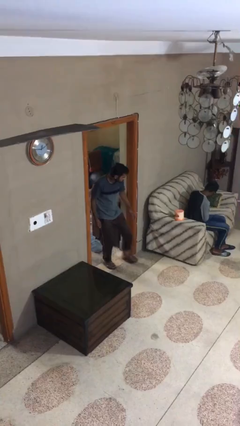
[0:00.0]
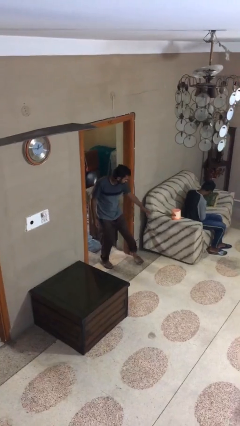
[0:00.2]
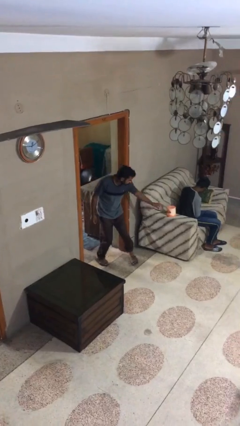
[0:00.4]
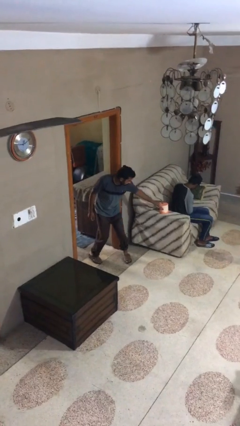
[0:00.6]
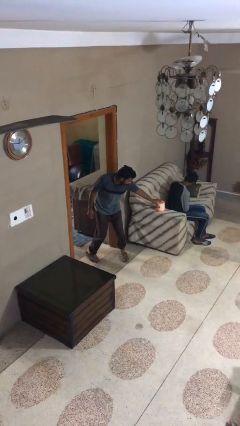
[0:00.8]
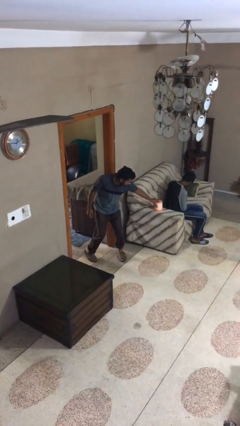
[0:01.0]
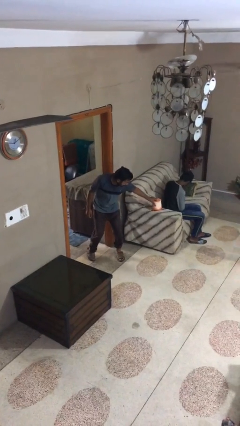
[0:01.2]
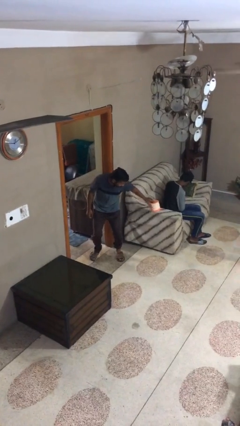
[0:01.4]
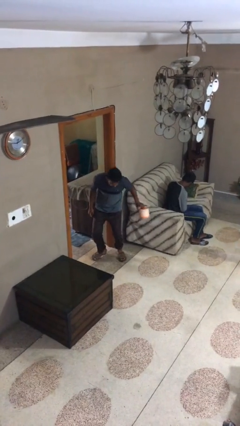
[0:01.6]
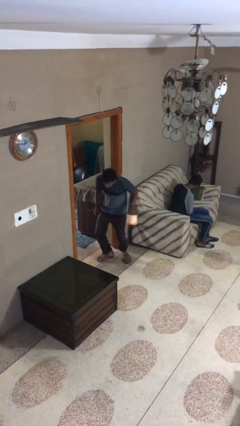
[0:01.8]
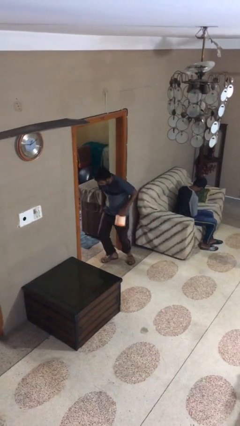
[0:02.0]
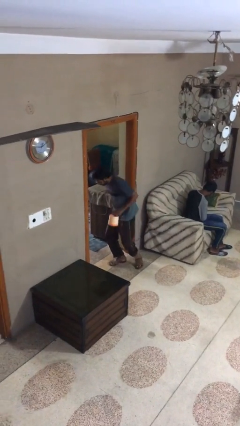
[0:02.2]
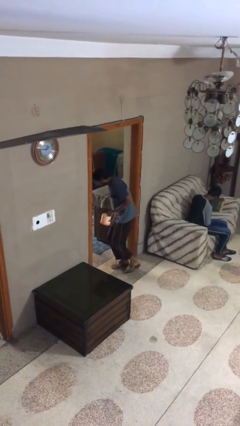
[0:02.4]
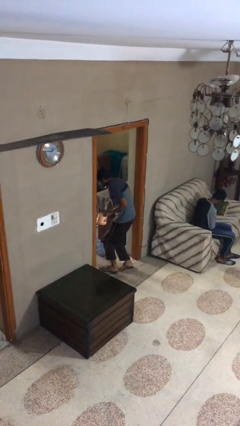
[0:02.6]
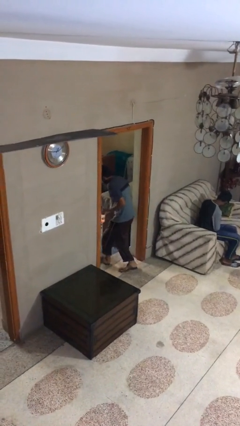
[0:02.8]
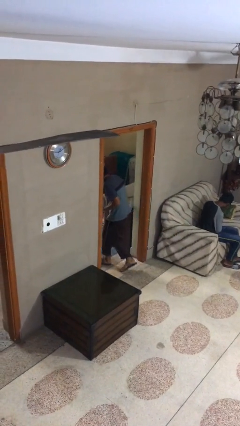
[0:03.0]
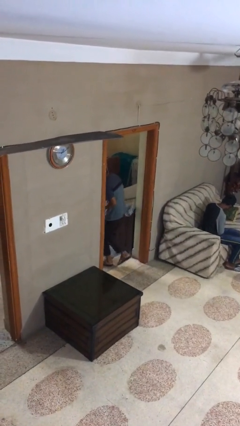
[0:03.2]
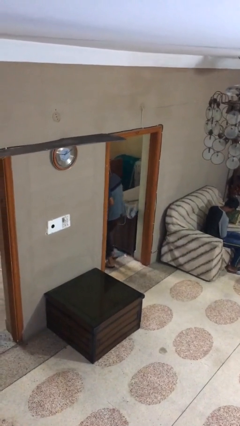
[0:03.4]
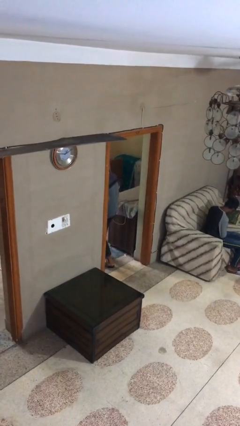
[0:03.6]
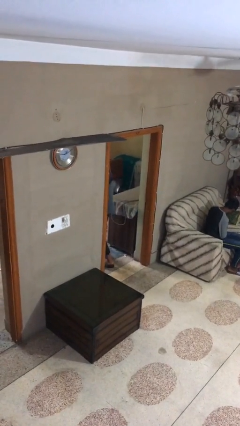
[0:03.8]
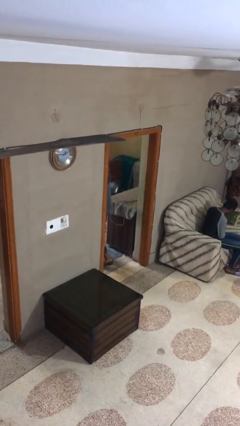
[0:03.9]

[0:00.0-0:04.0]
person steals object from person

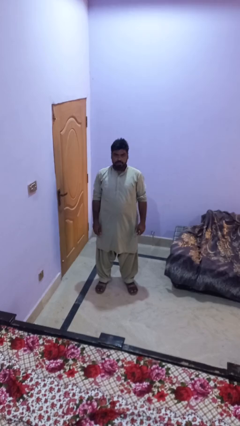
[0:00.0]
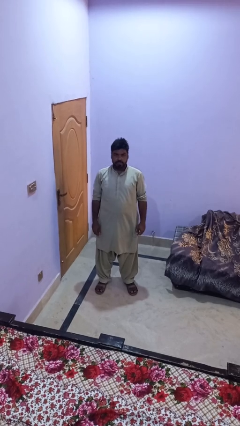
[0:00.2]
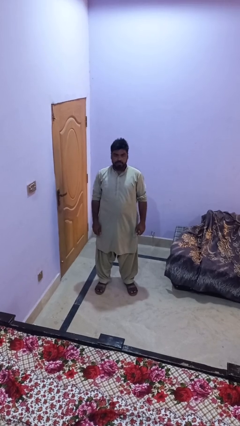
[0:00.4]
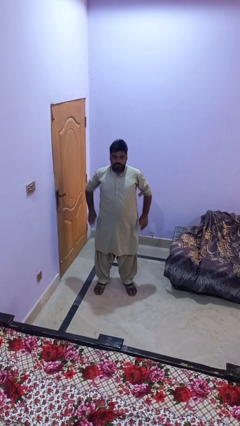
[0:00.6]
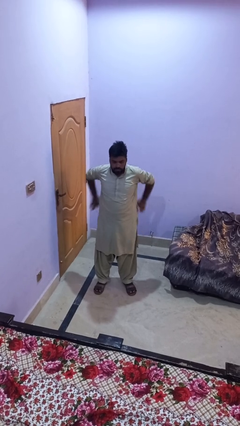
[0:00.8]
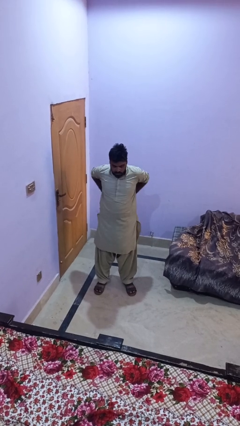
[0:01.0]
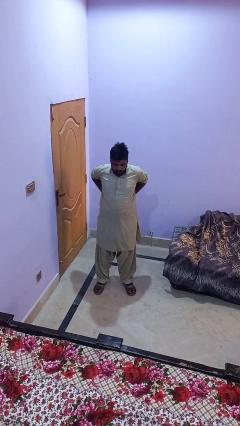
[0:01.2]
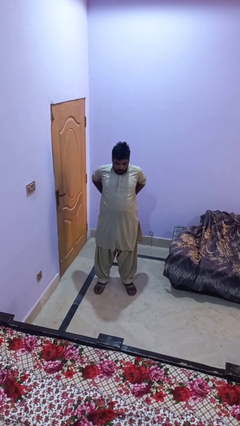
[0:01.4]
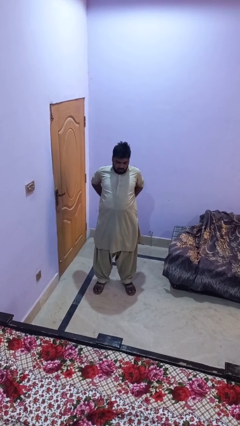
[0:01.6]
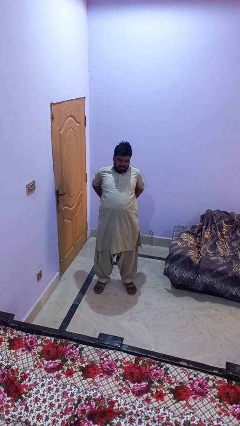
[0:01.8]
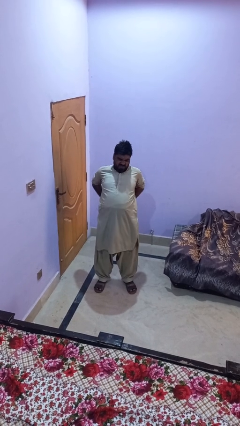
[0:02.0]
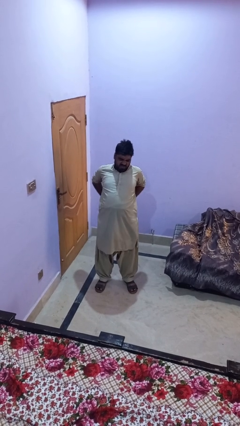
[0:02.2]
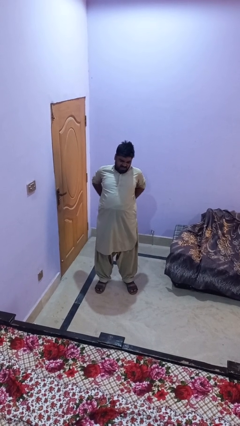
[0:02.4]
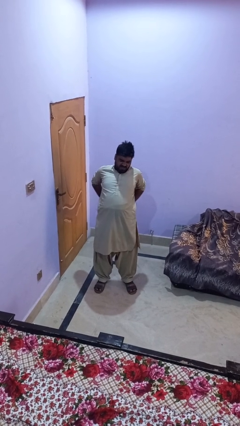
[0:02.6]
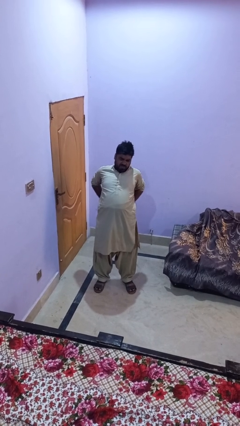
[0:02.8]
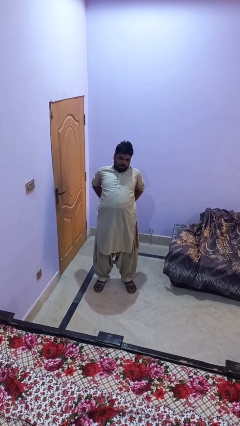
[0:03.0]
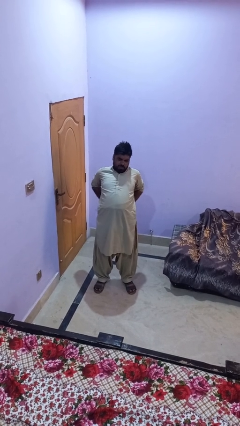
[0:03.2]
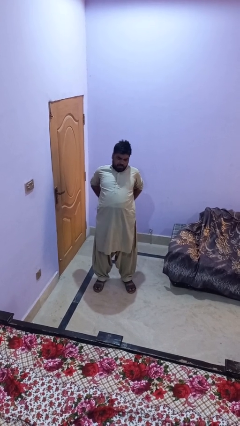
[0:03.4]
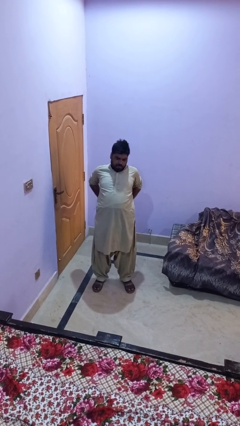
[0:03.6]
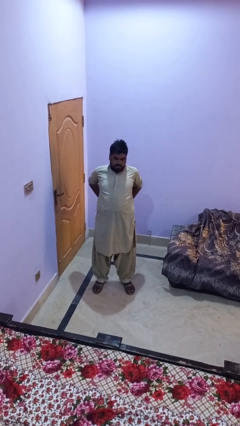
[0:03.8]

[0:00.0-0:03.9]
person stretches back

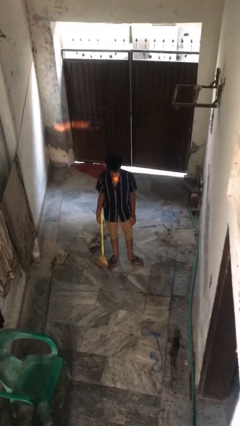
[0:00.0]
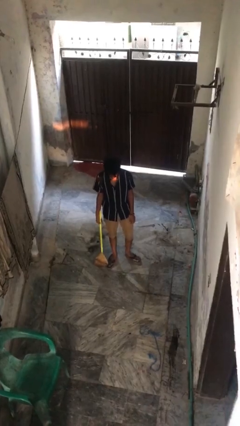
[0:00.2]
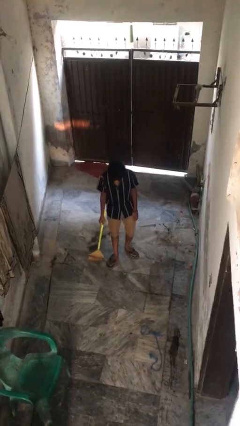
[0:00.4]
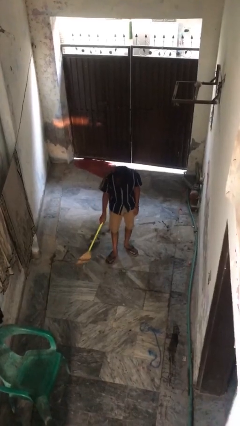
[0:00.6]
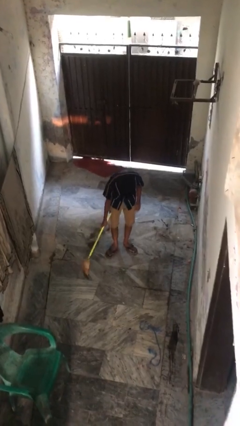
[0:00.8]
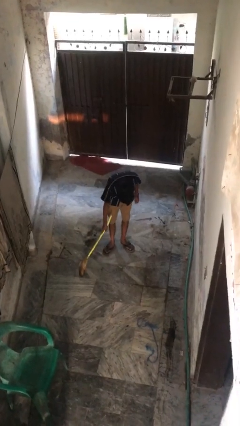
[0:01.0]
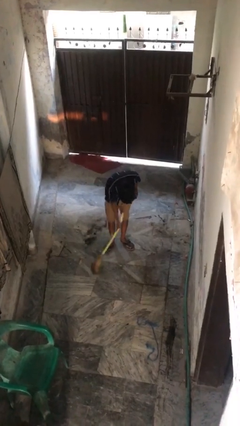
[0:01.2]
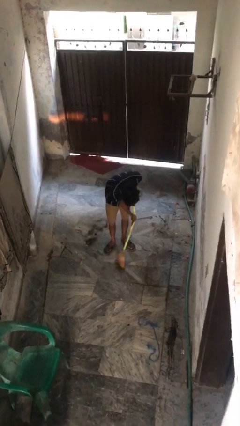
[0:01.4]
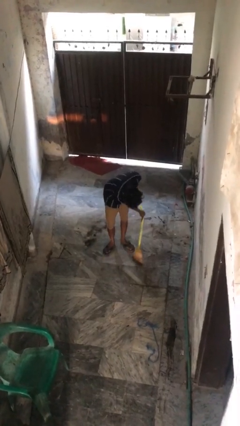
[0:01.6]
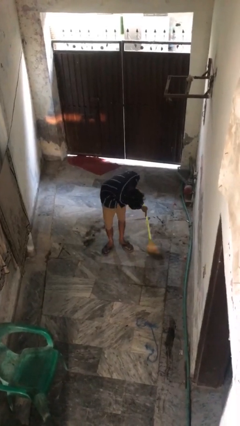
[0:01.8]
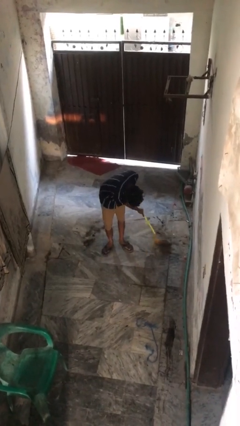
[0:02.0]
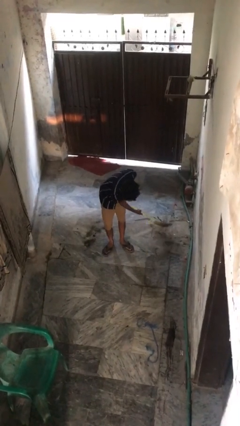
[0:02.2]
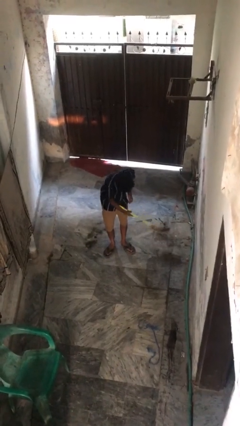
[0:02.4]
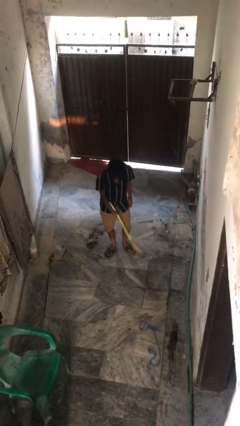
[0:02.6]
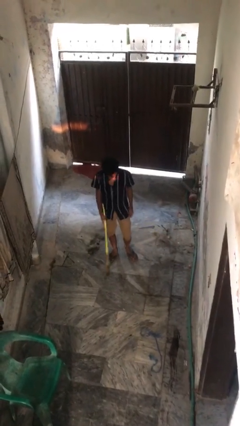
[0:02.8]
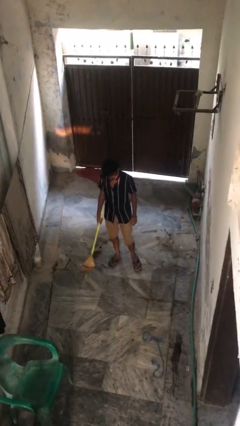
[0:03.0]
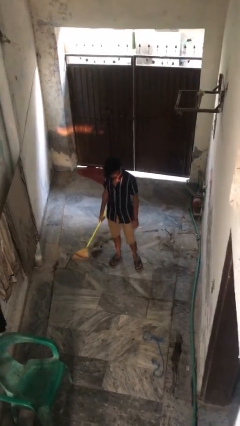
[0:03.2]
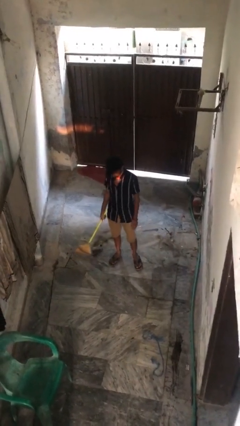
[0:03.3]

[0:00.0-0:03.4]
person sweeps floor

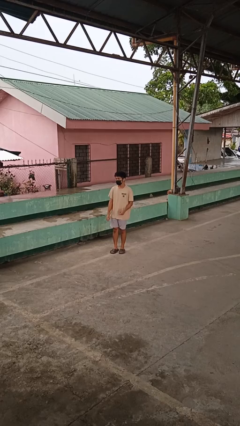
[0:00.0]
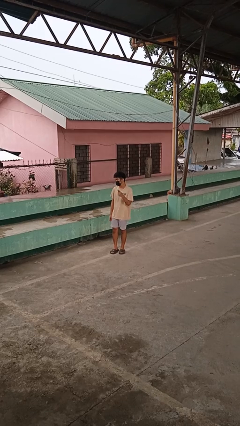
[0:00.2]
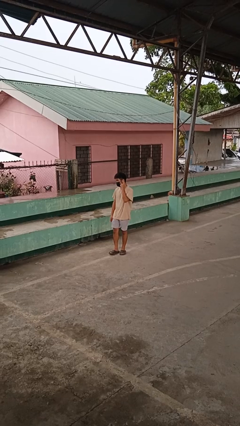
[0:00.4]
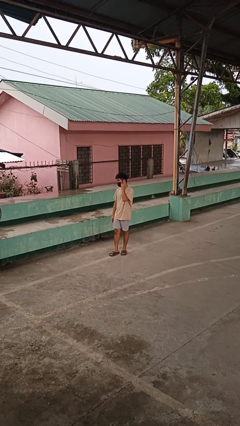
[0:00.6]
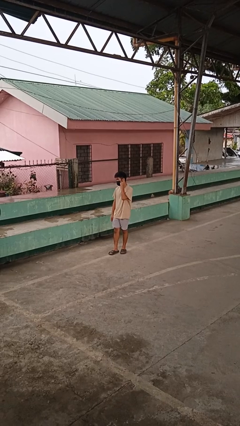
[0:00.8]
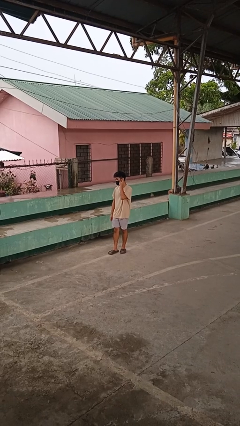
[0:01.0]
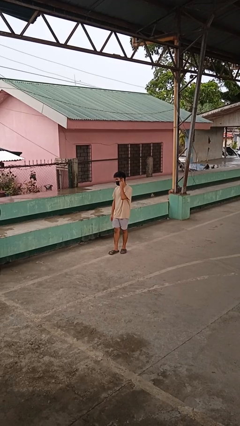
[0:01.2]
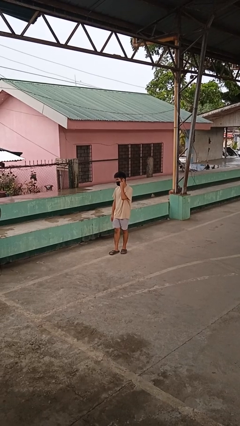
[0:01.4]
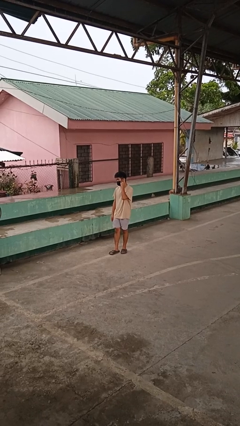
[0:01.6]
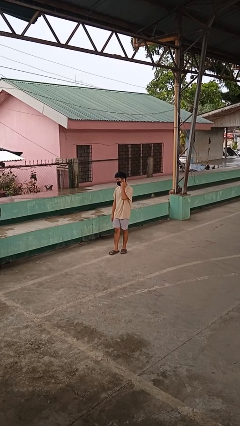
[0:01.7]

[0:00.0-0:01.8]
person gestures listen closely

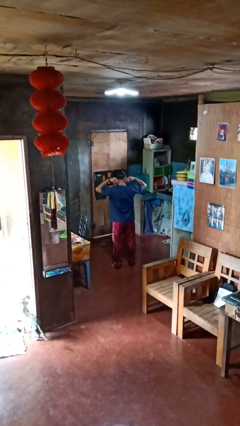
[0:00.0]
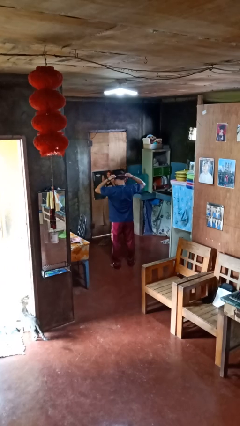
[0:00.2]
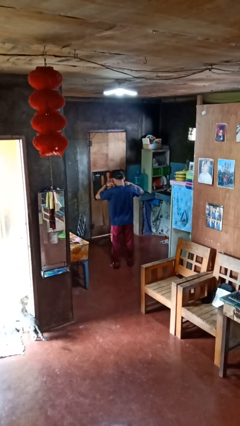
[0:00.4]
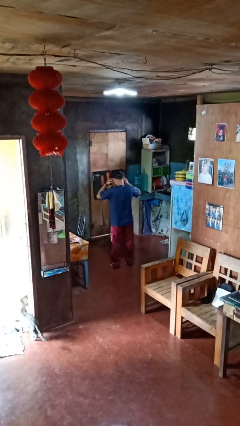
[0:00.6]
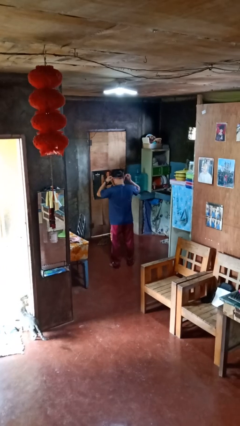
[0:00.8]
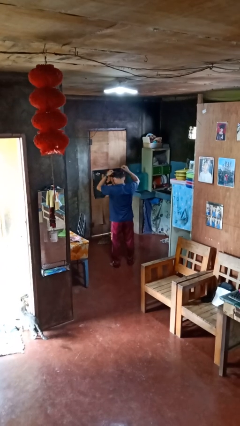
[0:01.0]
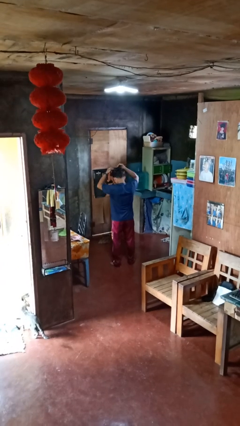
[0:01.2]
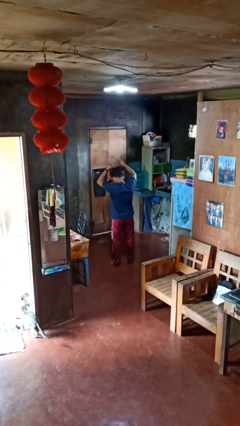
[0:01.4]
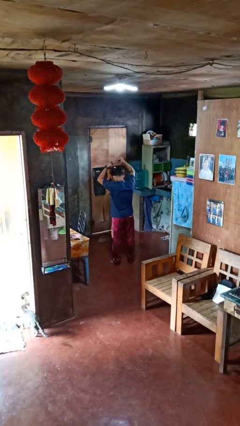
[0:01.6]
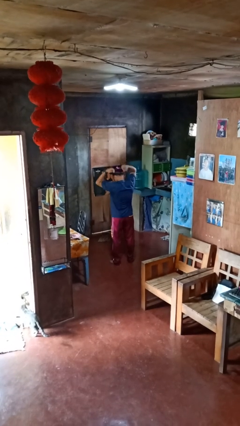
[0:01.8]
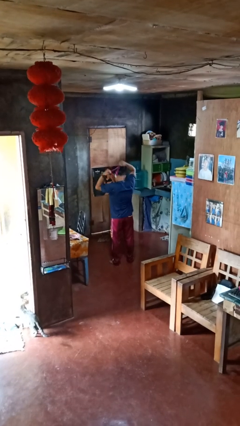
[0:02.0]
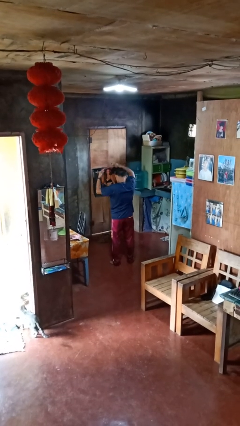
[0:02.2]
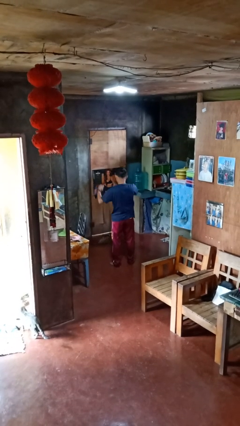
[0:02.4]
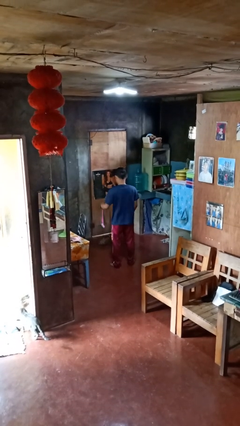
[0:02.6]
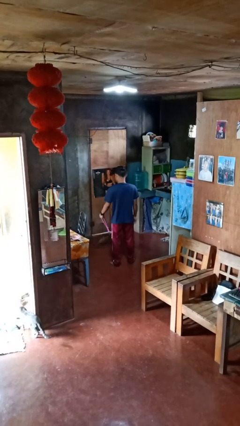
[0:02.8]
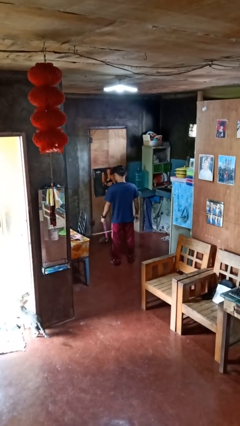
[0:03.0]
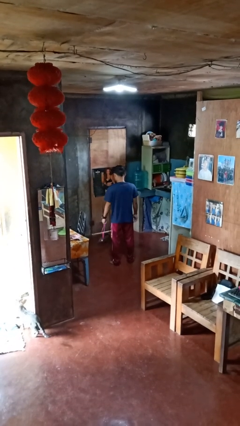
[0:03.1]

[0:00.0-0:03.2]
person takes off necklace

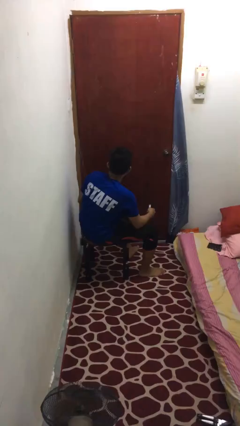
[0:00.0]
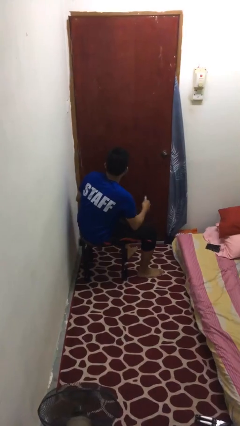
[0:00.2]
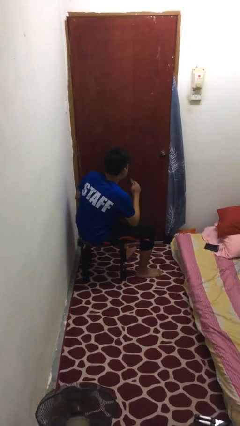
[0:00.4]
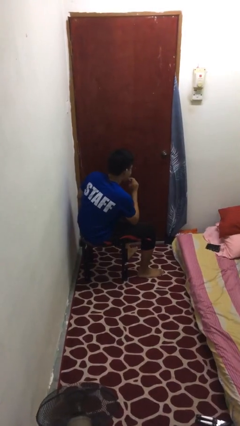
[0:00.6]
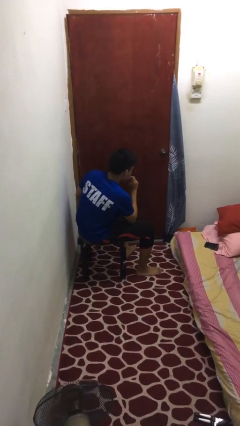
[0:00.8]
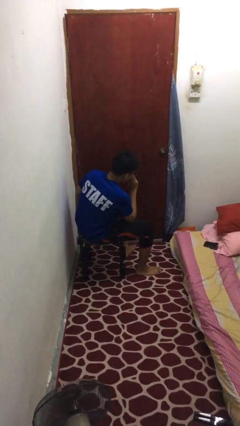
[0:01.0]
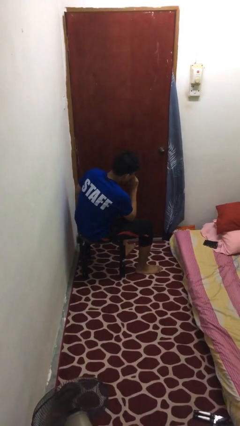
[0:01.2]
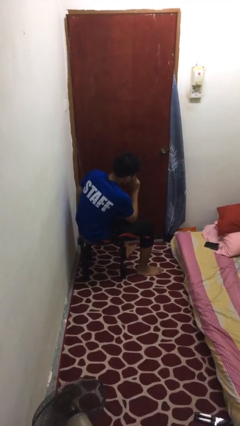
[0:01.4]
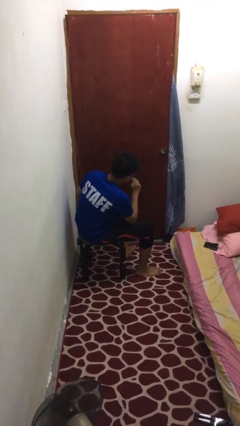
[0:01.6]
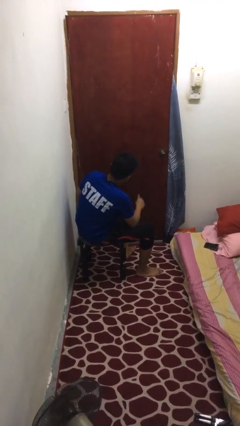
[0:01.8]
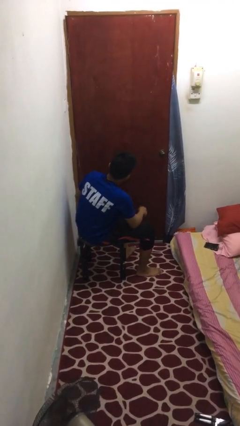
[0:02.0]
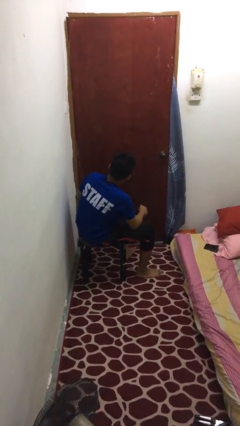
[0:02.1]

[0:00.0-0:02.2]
person vapes
